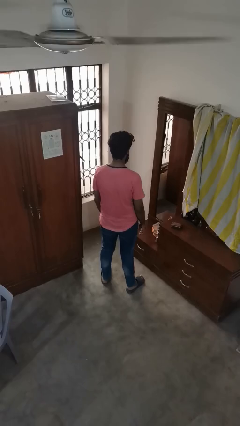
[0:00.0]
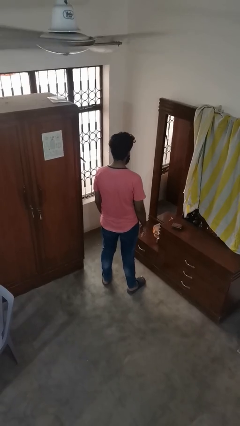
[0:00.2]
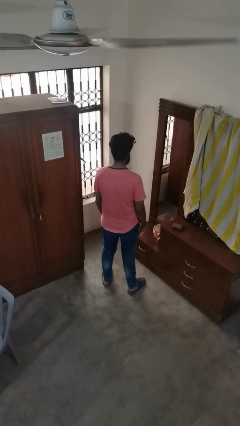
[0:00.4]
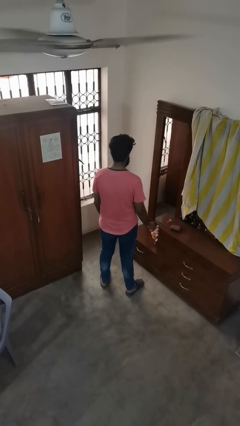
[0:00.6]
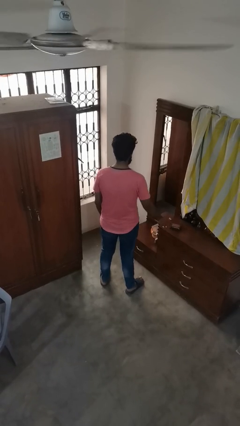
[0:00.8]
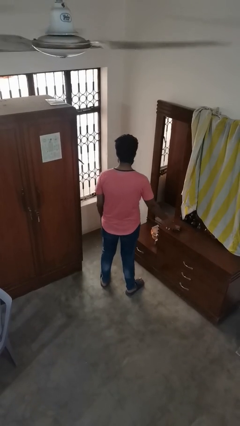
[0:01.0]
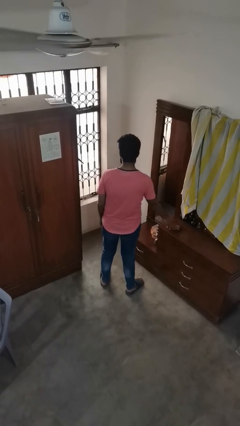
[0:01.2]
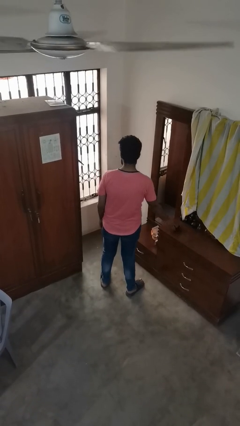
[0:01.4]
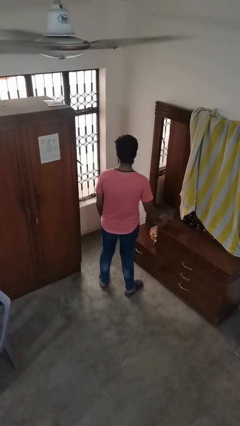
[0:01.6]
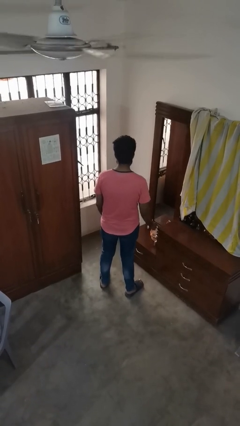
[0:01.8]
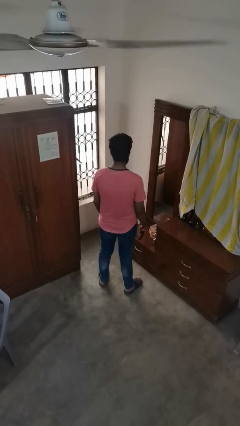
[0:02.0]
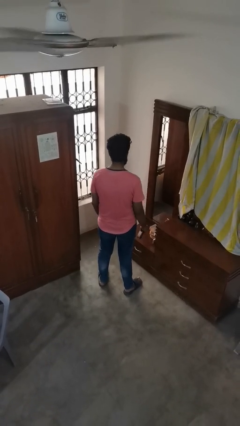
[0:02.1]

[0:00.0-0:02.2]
person picks up object from floor

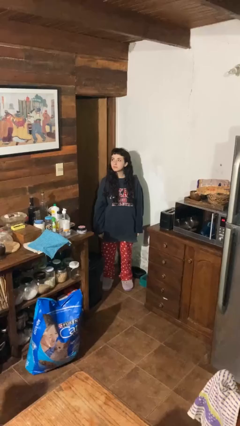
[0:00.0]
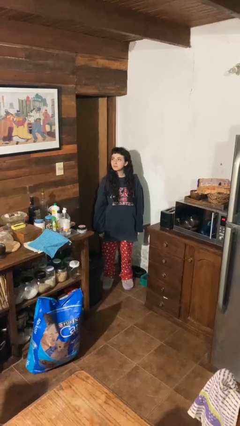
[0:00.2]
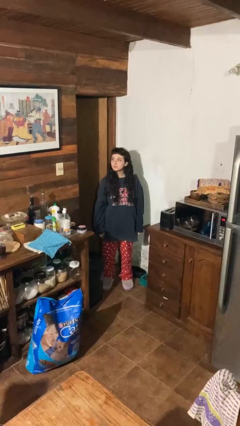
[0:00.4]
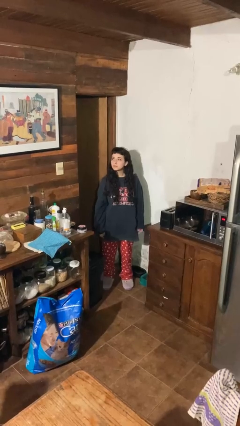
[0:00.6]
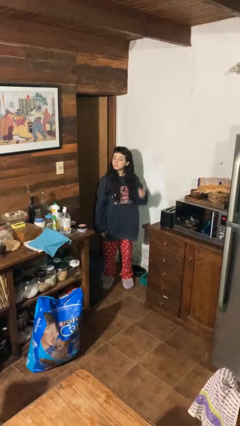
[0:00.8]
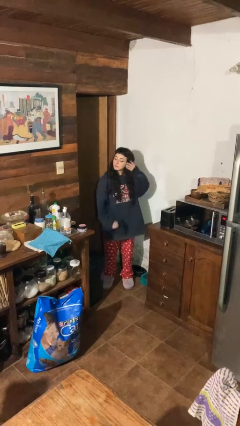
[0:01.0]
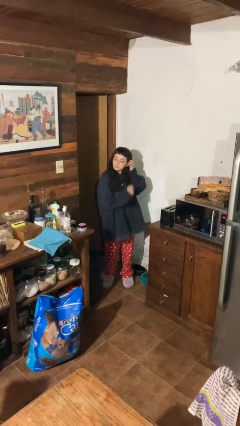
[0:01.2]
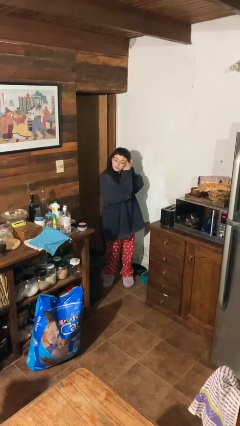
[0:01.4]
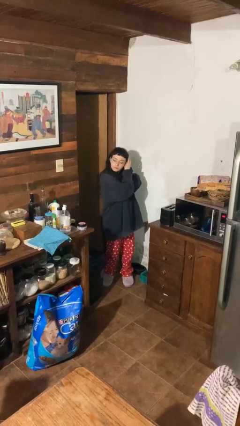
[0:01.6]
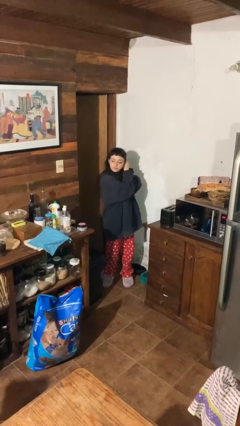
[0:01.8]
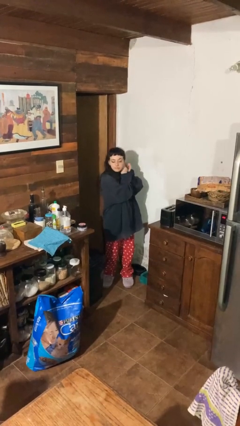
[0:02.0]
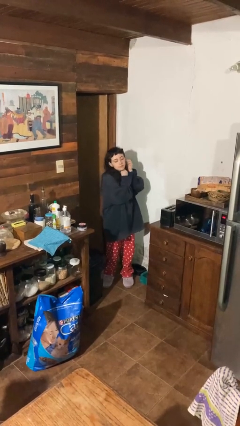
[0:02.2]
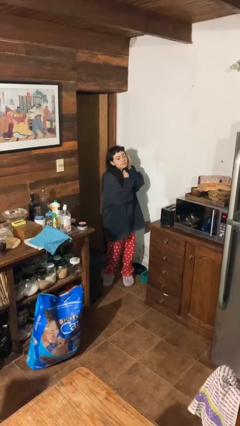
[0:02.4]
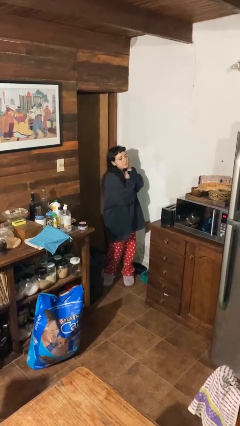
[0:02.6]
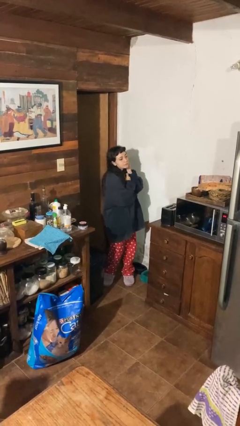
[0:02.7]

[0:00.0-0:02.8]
person strokes hair

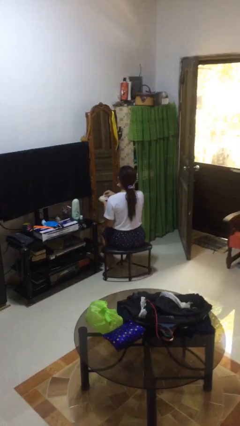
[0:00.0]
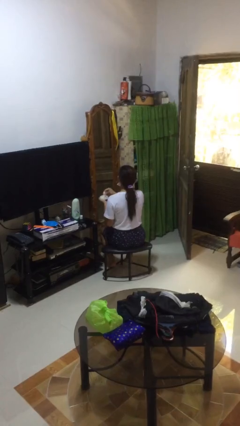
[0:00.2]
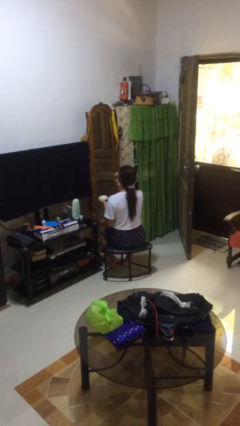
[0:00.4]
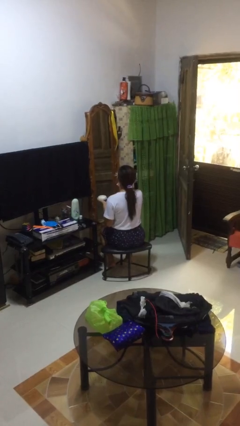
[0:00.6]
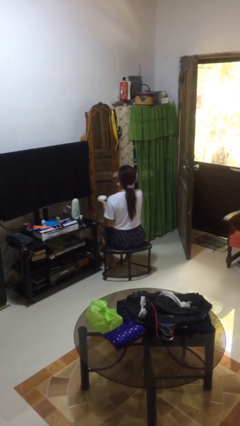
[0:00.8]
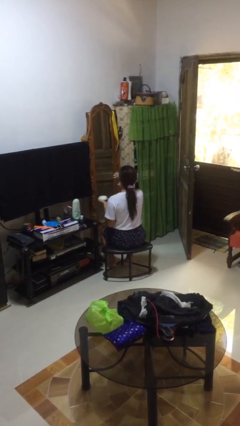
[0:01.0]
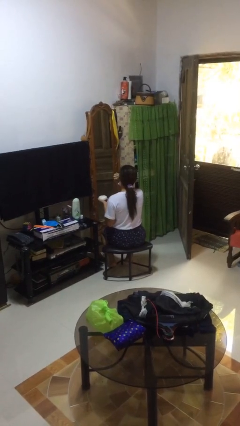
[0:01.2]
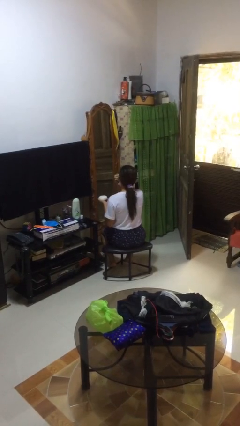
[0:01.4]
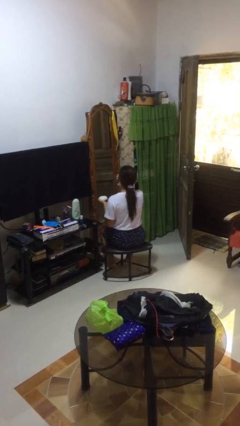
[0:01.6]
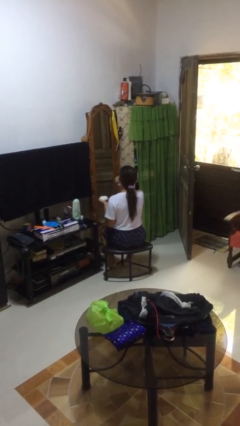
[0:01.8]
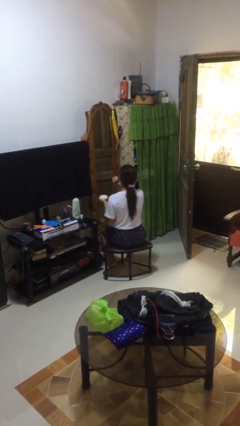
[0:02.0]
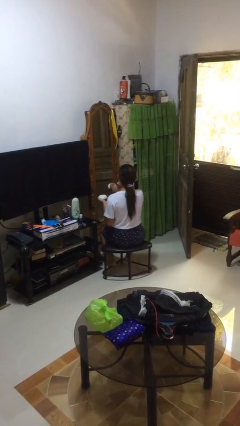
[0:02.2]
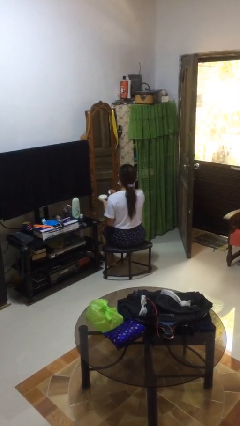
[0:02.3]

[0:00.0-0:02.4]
person applies foundation makeup

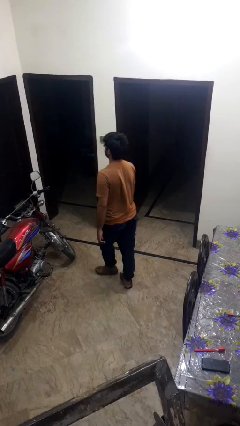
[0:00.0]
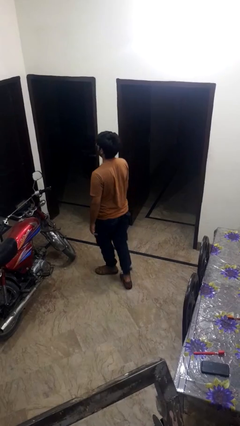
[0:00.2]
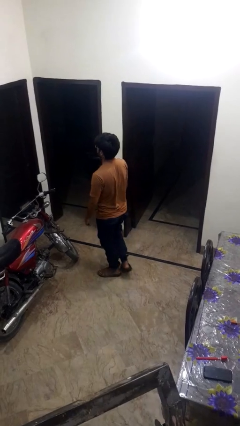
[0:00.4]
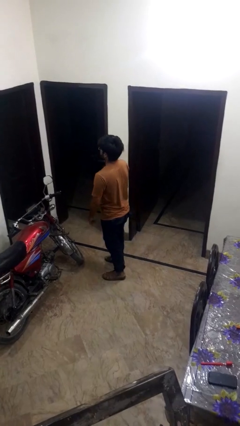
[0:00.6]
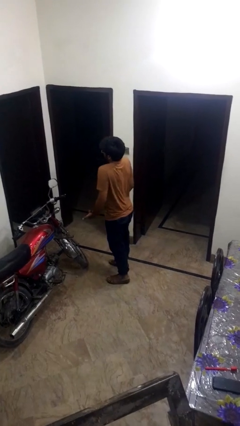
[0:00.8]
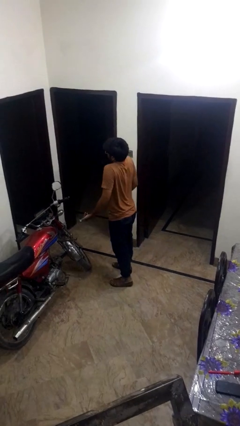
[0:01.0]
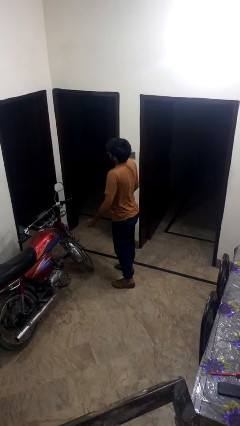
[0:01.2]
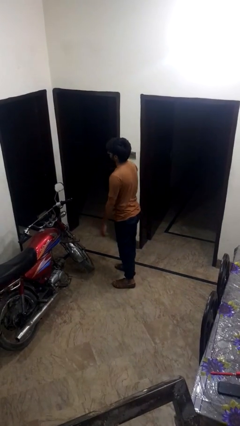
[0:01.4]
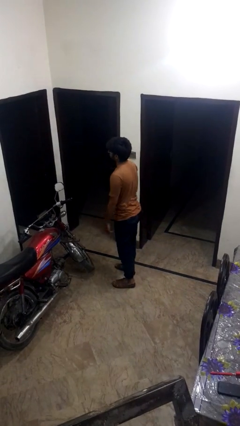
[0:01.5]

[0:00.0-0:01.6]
person shrugs

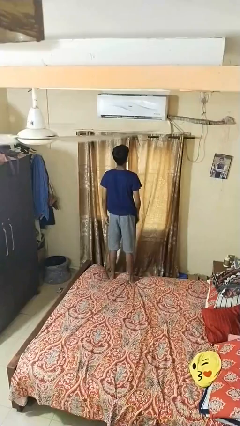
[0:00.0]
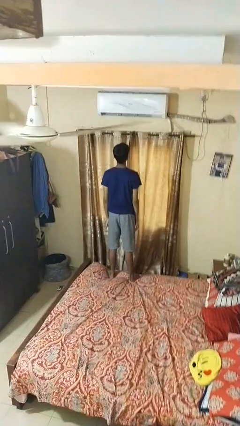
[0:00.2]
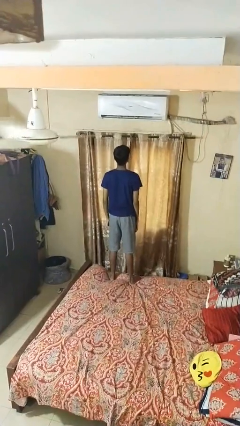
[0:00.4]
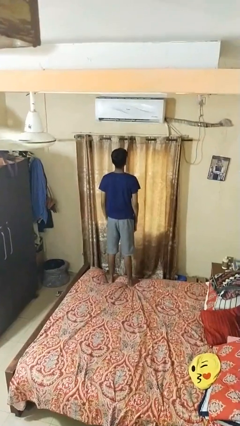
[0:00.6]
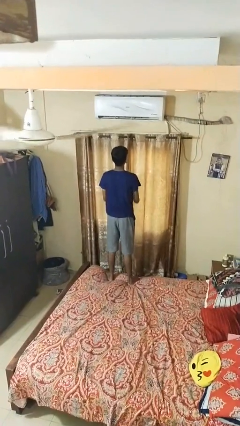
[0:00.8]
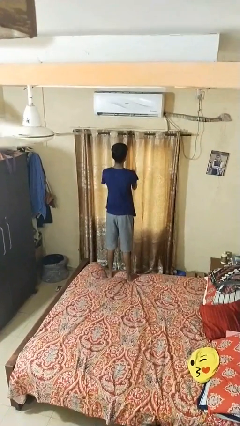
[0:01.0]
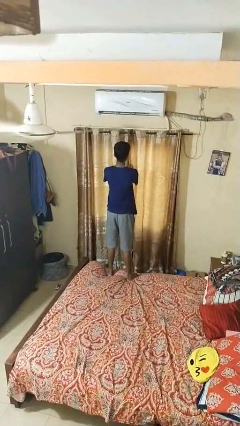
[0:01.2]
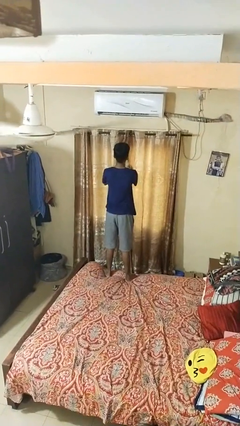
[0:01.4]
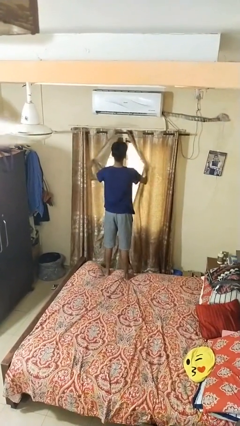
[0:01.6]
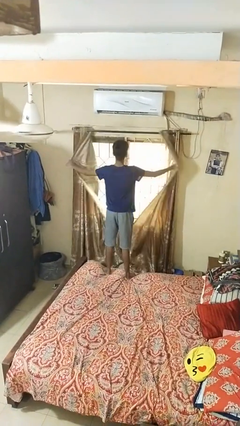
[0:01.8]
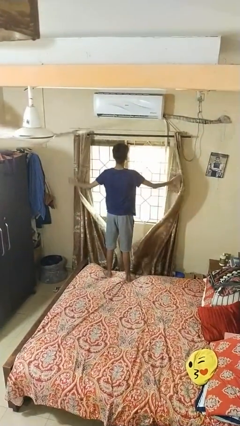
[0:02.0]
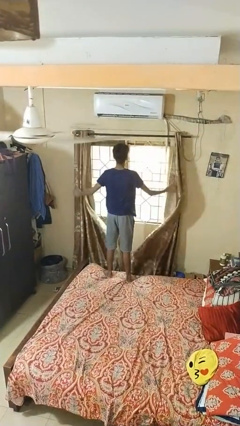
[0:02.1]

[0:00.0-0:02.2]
person opens curtains

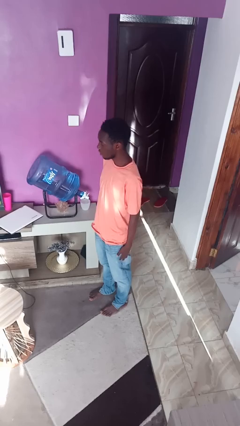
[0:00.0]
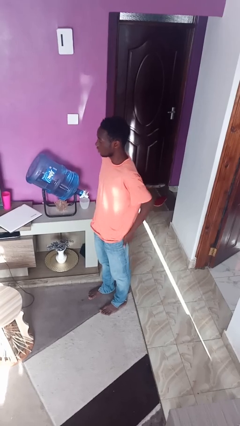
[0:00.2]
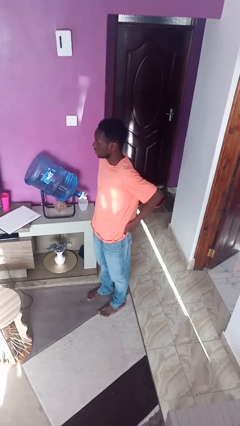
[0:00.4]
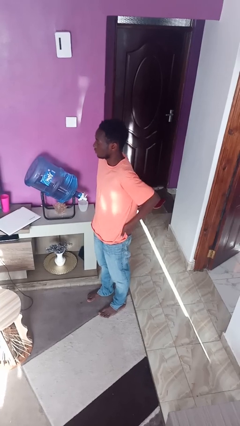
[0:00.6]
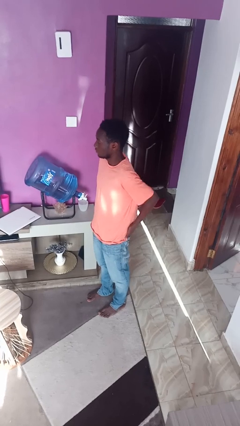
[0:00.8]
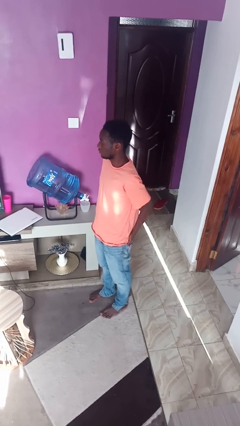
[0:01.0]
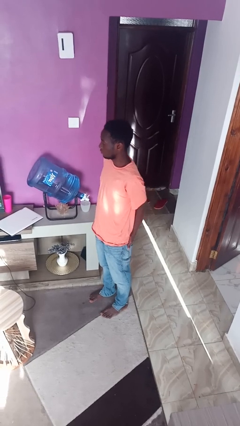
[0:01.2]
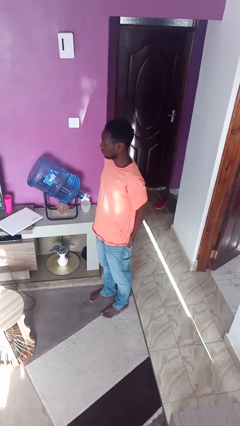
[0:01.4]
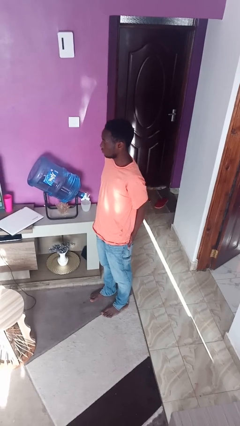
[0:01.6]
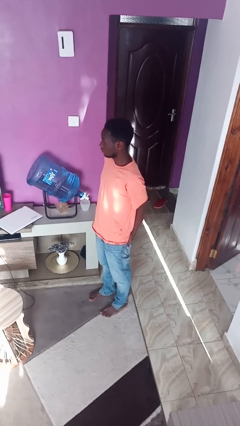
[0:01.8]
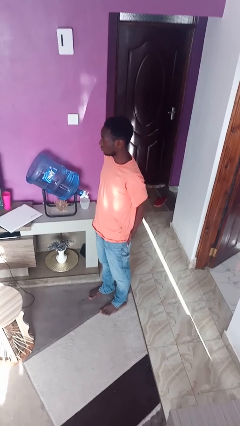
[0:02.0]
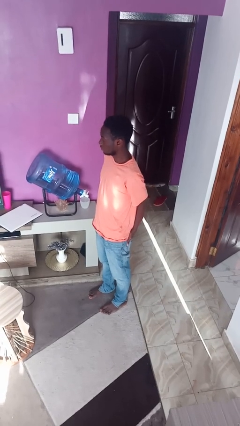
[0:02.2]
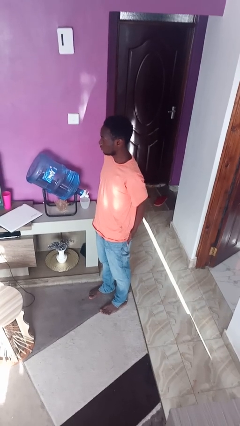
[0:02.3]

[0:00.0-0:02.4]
person puts hands in back pockets

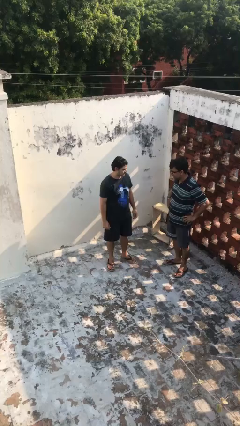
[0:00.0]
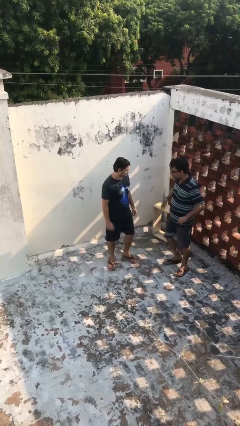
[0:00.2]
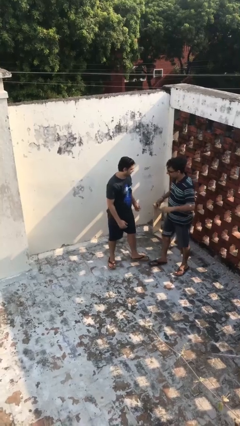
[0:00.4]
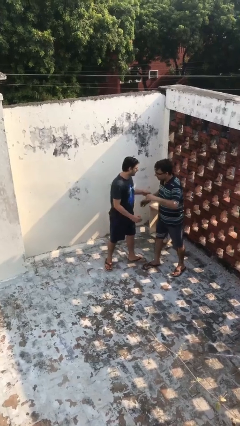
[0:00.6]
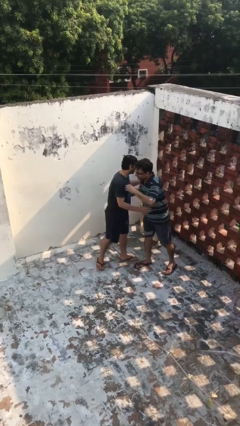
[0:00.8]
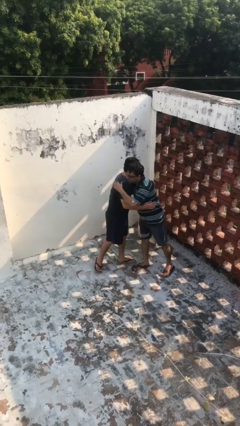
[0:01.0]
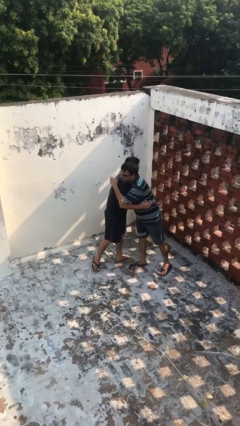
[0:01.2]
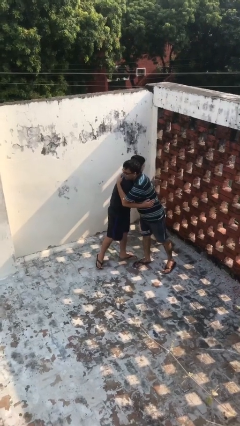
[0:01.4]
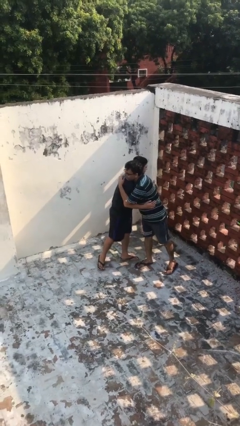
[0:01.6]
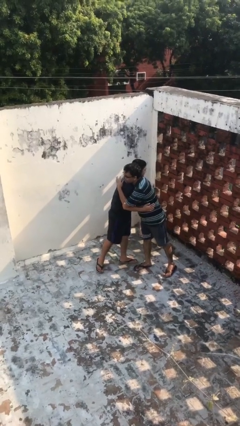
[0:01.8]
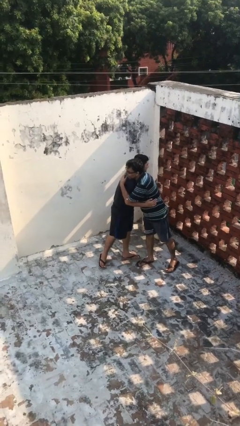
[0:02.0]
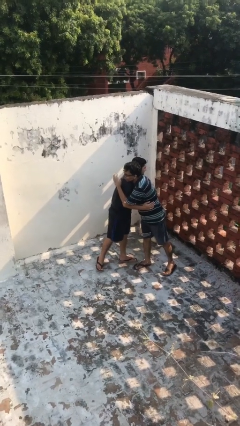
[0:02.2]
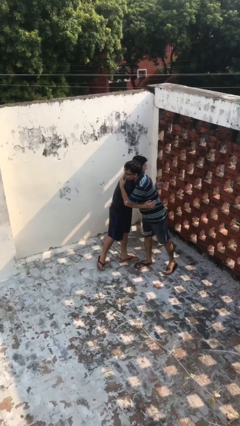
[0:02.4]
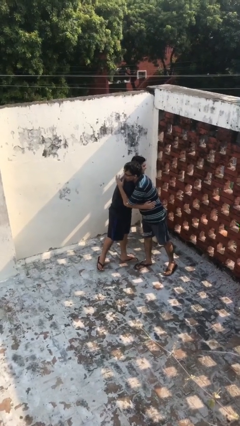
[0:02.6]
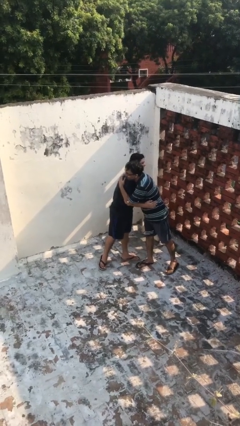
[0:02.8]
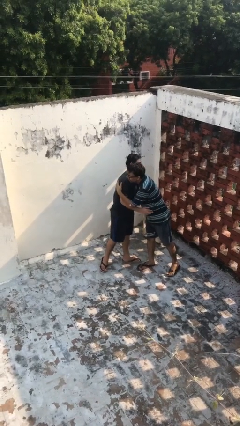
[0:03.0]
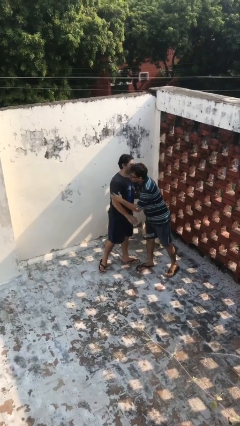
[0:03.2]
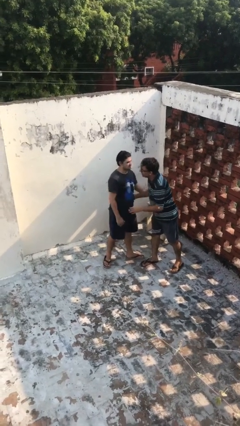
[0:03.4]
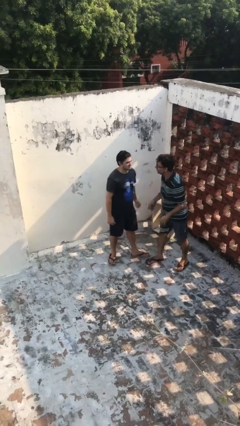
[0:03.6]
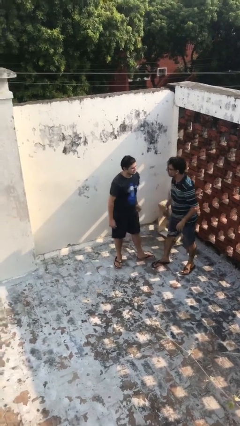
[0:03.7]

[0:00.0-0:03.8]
person embraces person
